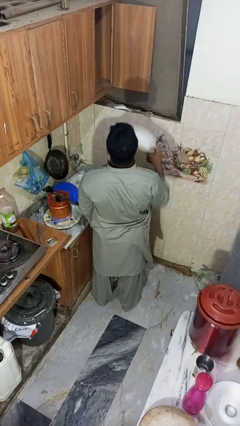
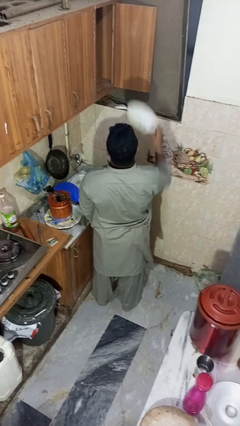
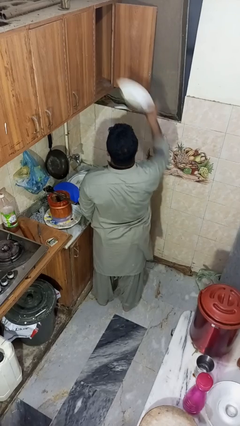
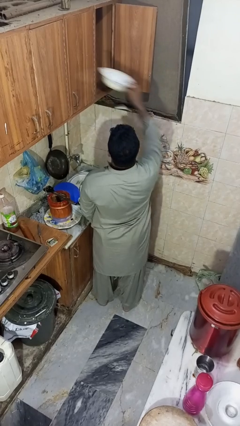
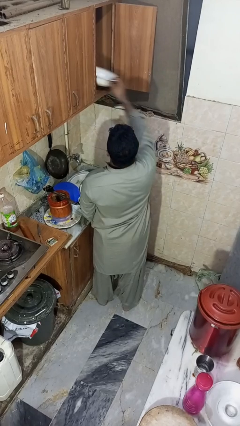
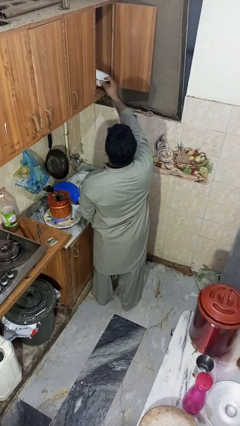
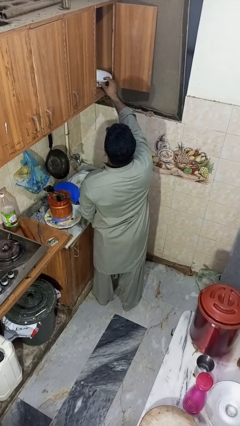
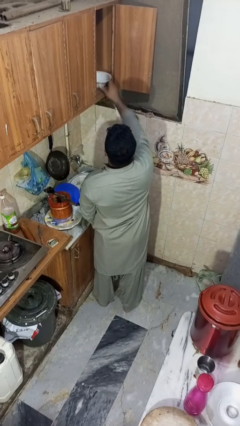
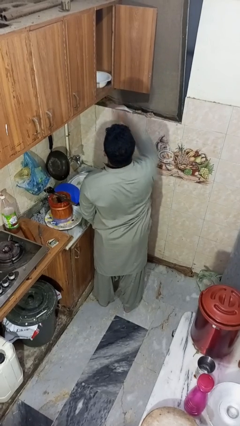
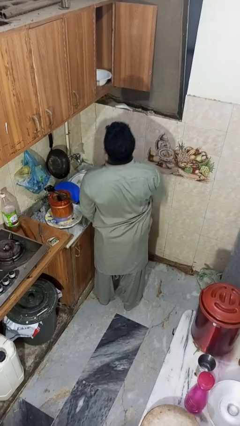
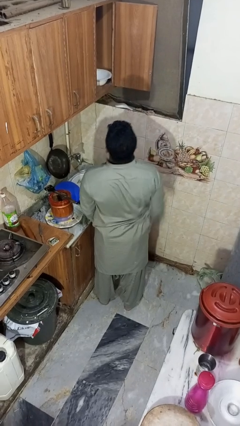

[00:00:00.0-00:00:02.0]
person puts object in cabinet

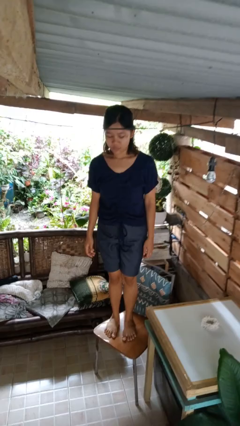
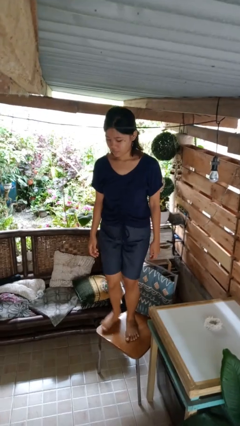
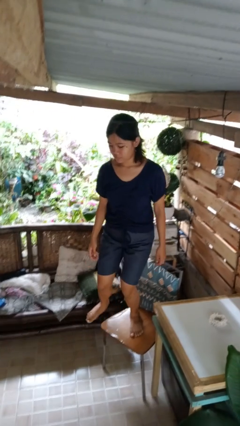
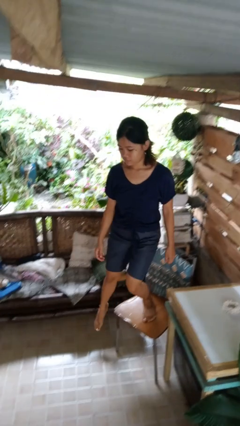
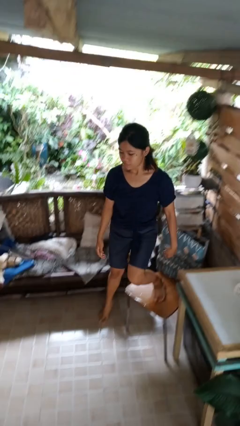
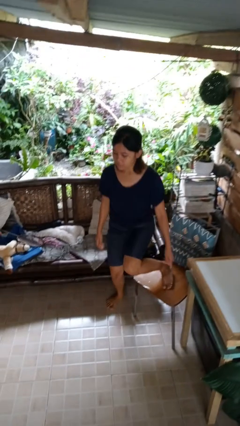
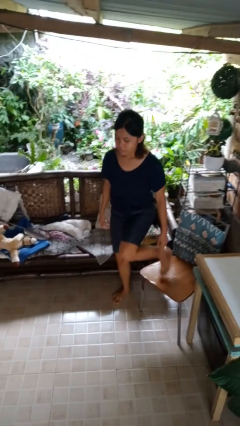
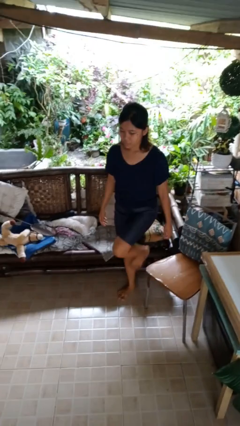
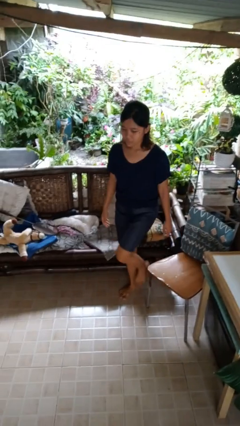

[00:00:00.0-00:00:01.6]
person climbs off chair

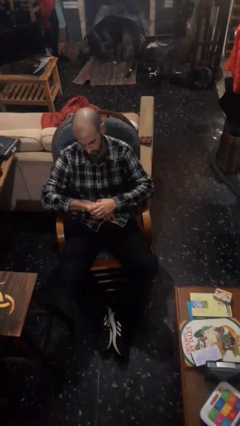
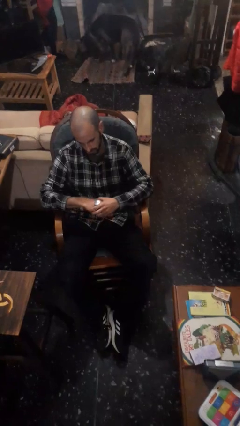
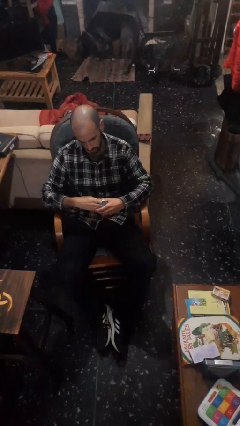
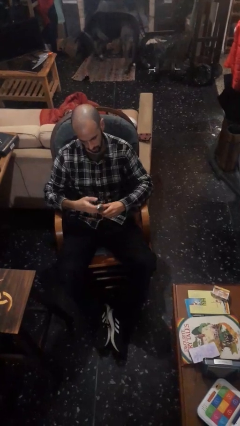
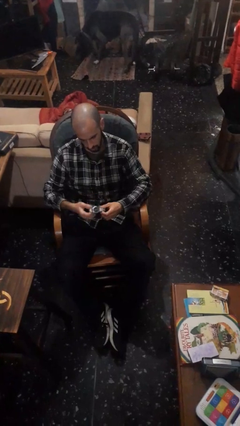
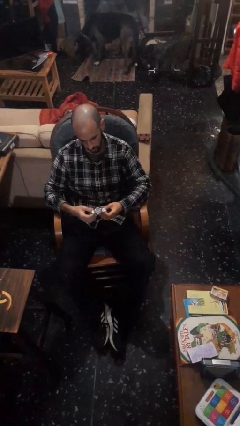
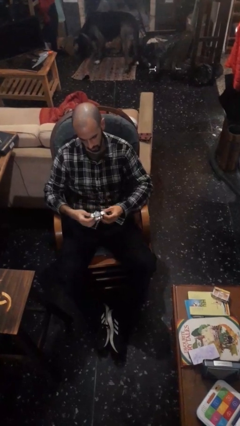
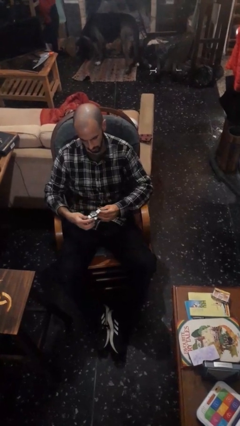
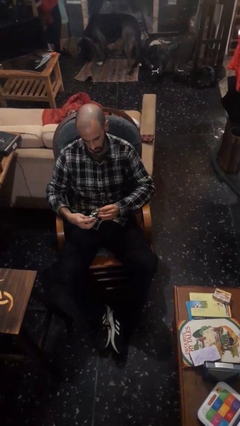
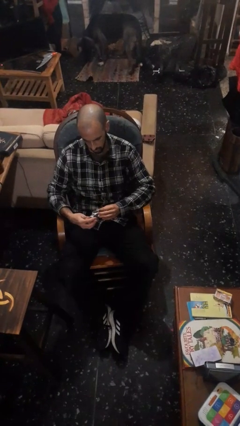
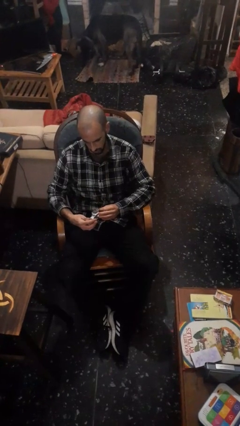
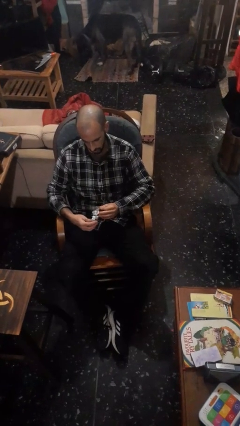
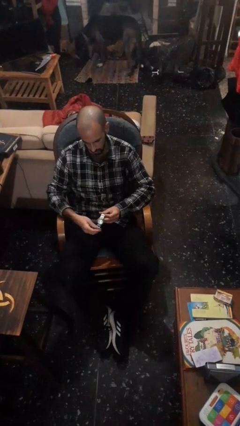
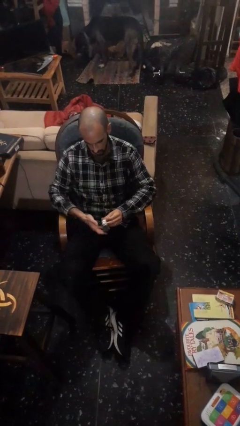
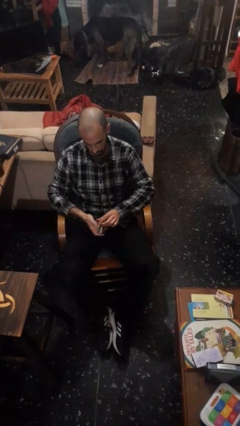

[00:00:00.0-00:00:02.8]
person takes off wristwatch

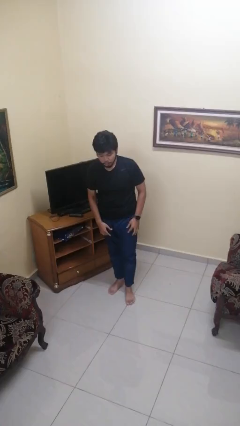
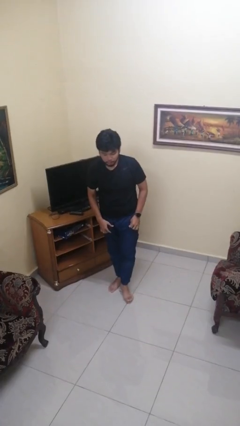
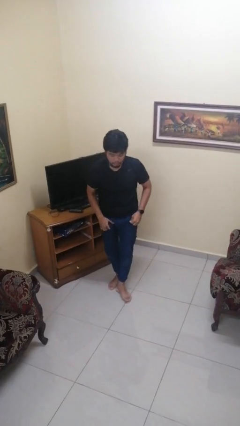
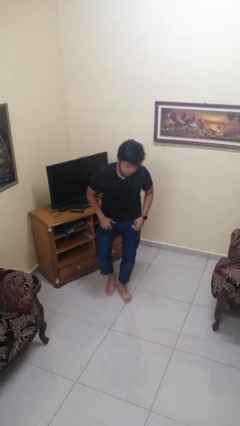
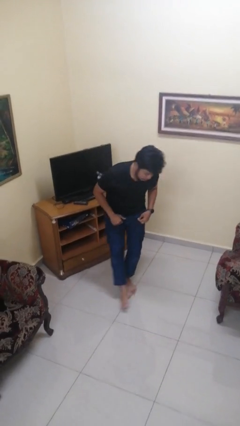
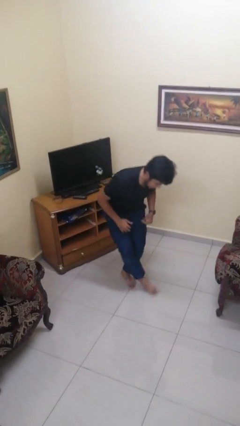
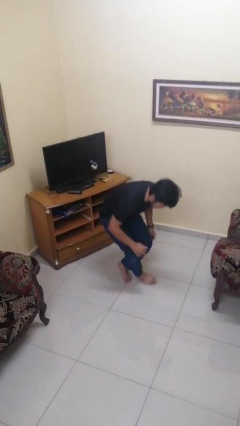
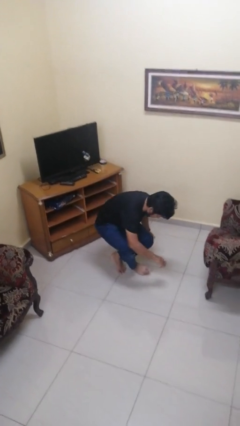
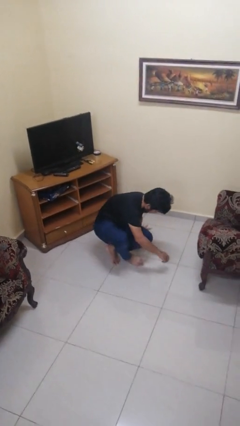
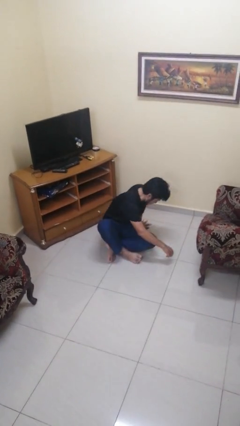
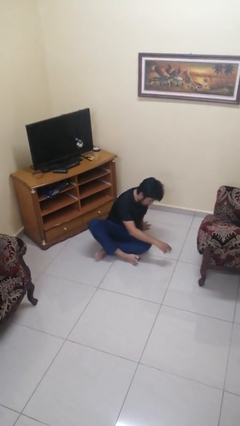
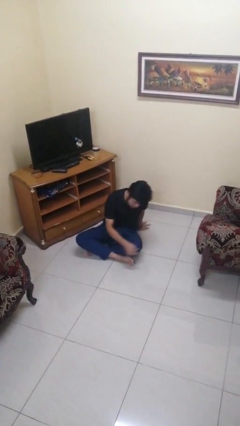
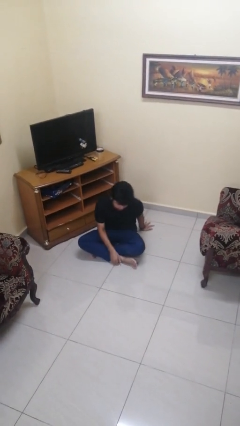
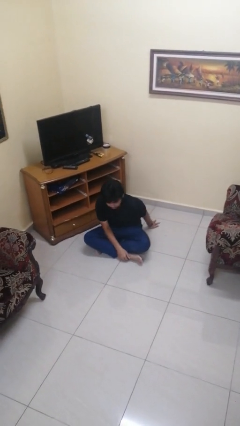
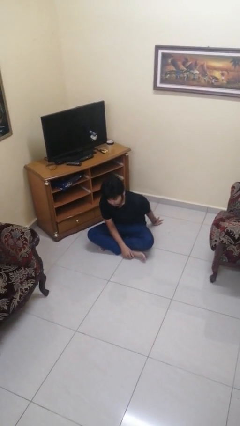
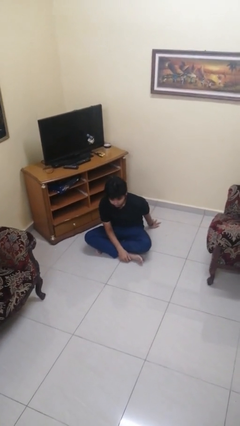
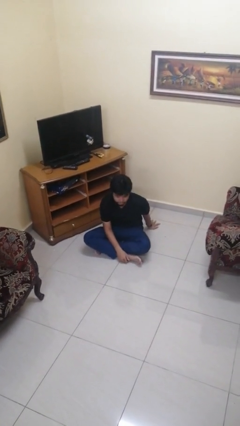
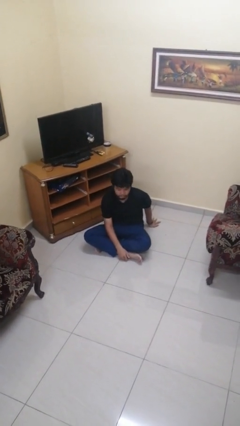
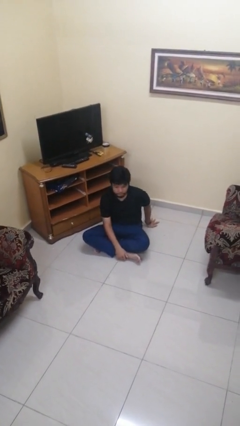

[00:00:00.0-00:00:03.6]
person sits crisscross

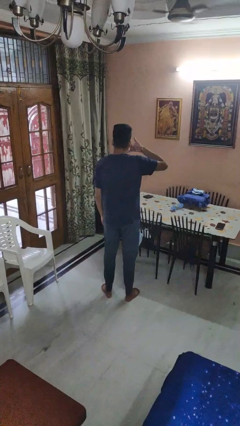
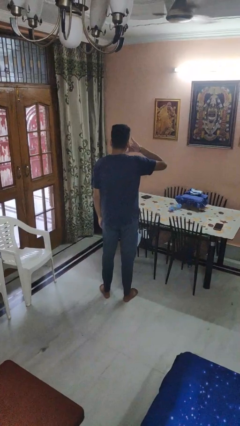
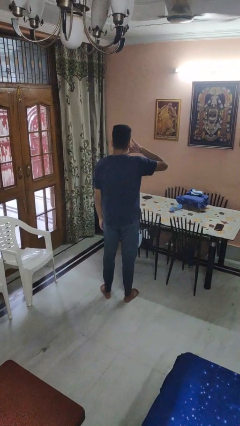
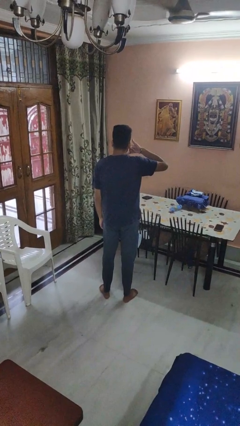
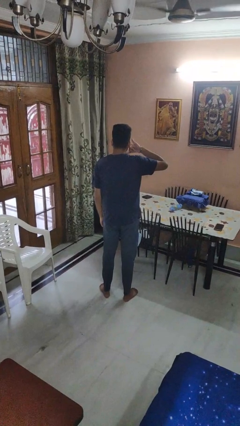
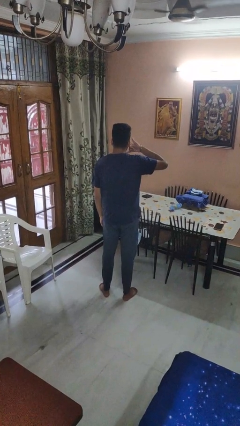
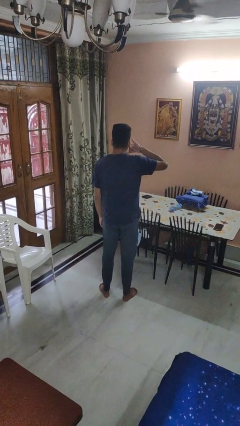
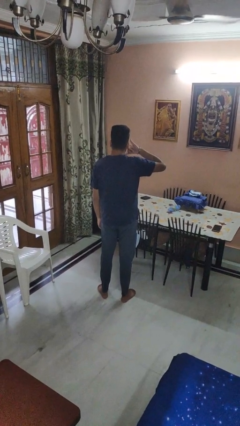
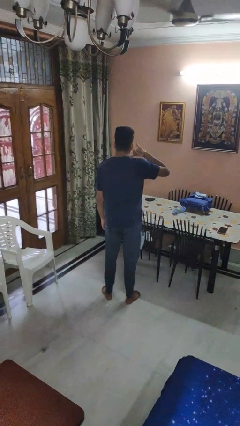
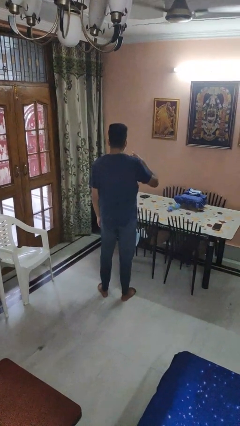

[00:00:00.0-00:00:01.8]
person gestures call me

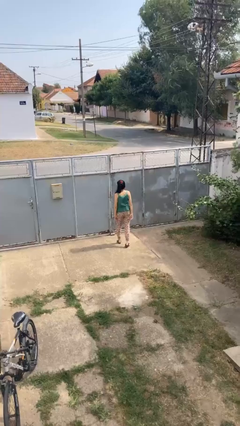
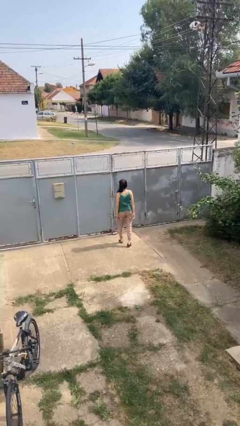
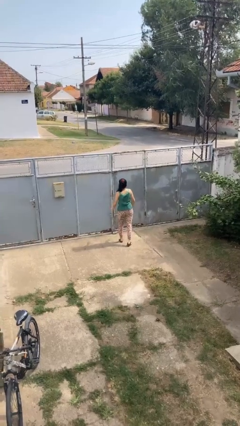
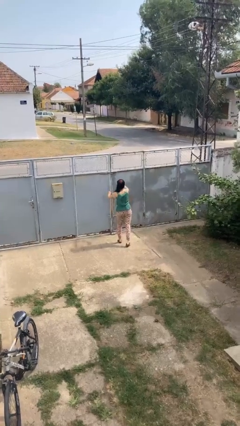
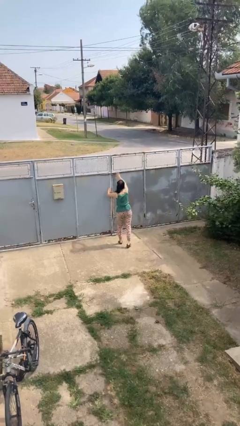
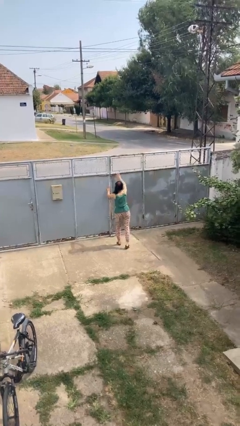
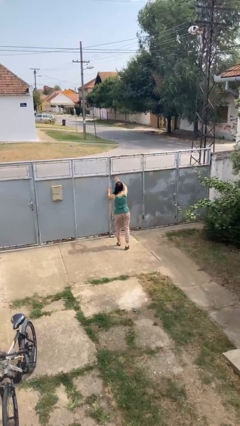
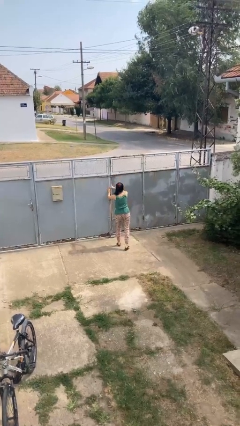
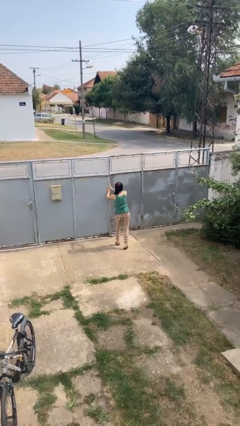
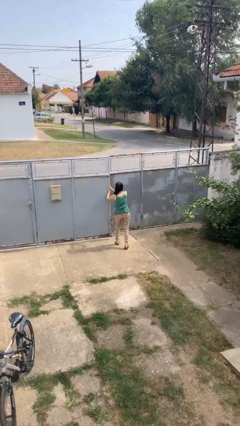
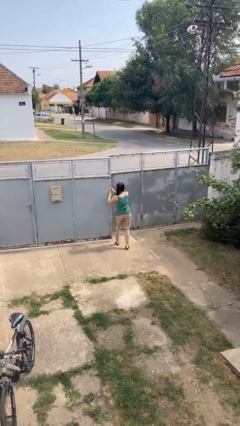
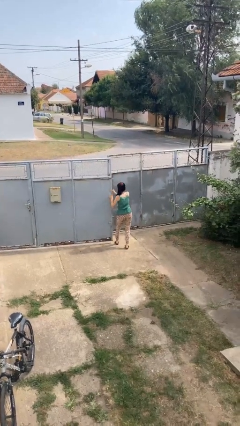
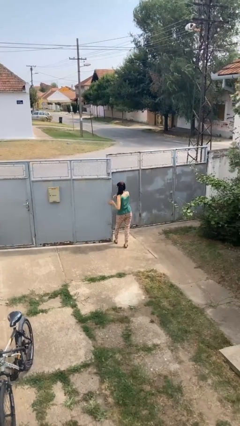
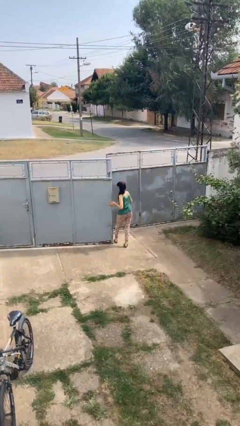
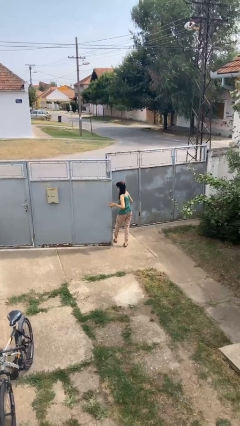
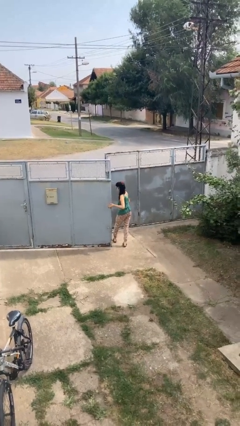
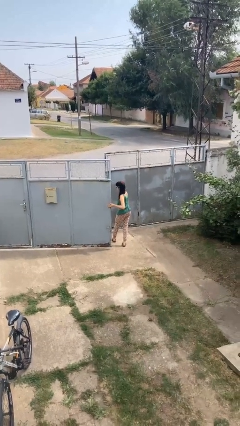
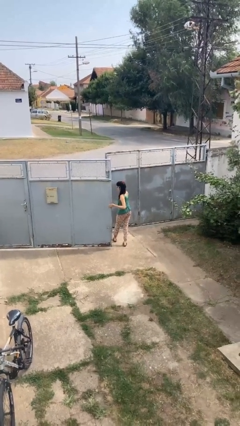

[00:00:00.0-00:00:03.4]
person opens gate

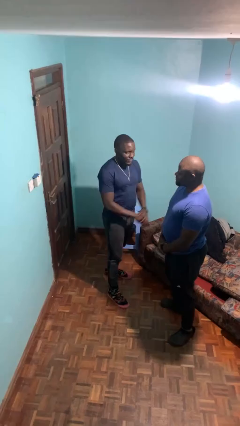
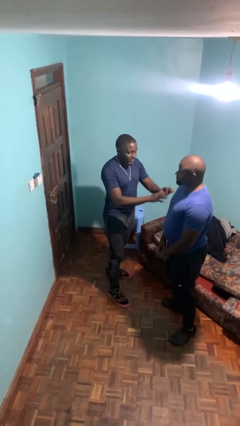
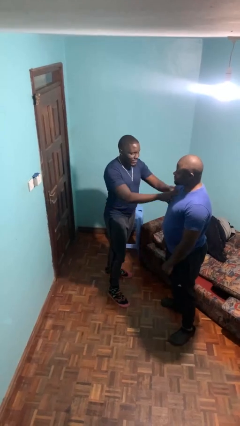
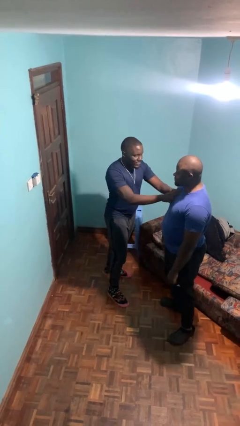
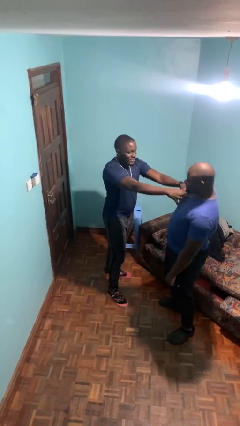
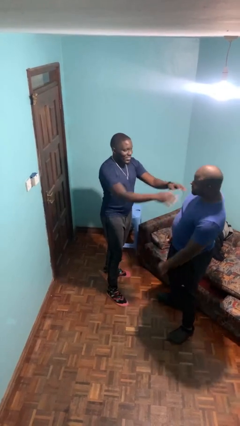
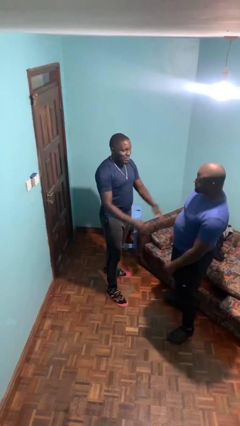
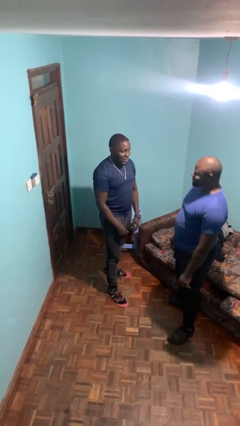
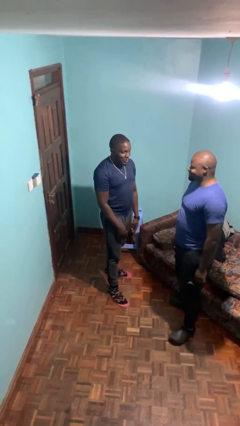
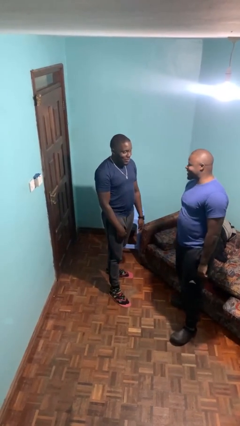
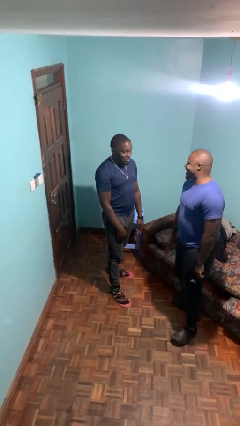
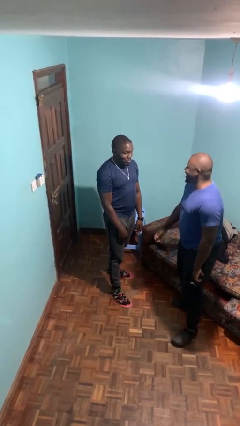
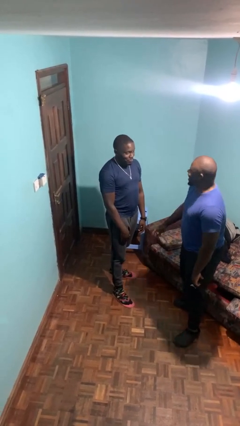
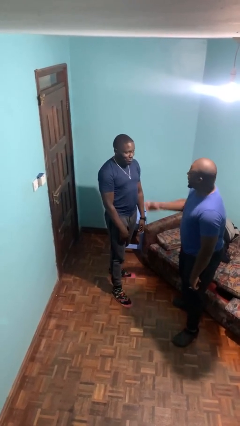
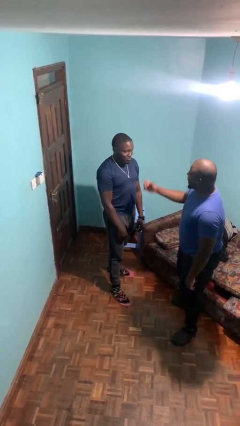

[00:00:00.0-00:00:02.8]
person shoves person
